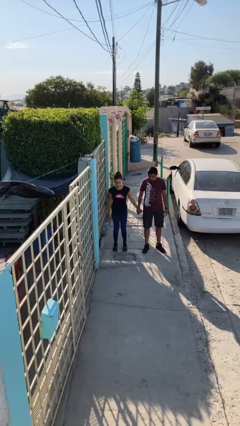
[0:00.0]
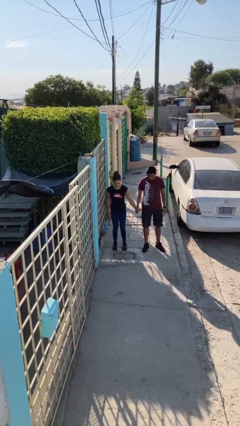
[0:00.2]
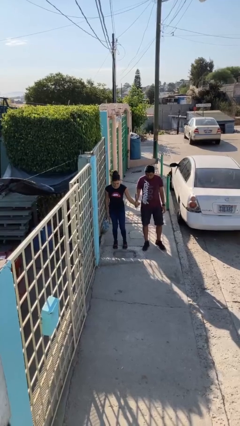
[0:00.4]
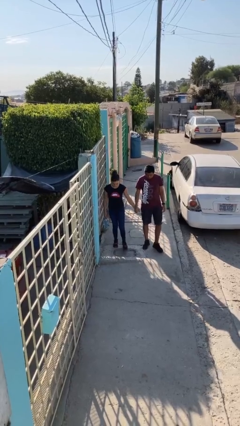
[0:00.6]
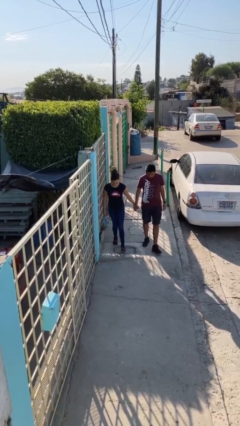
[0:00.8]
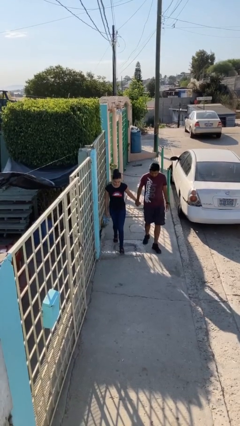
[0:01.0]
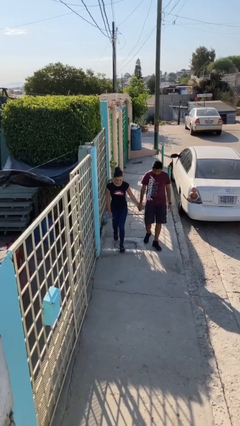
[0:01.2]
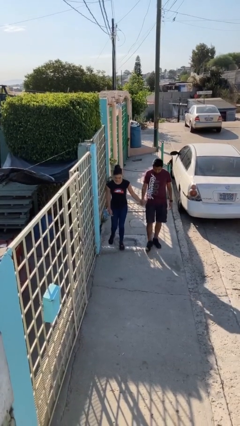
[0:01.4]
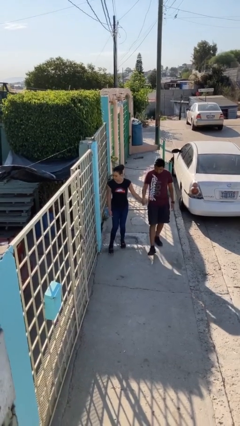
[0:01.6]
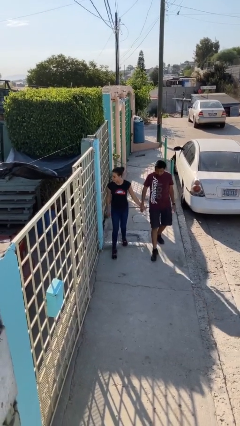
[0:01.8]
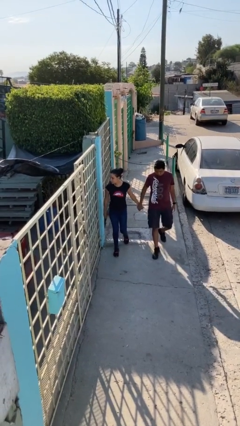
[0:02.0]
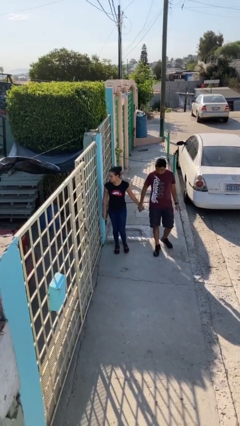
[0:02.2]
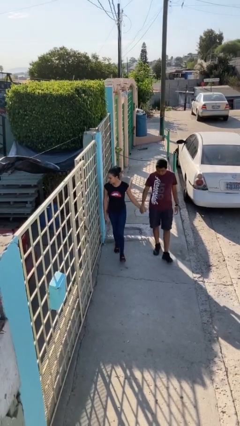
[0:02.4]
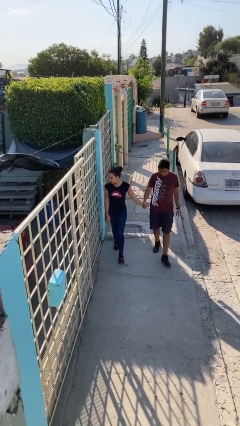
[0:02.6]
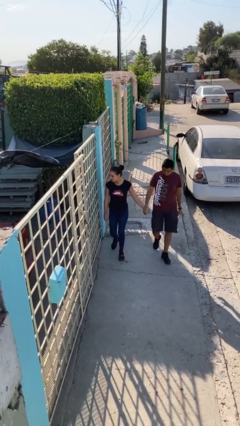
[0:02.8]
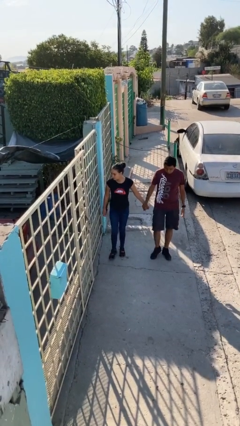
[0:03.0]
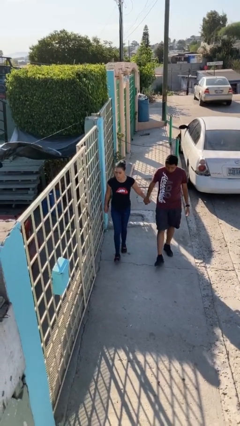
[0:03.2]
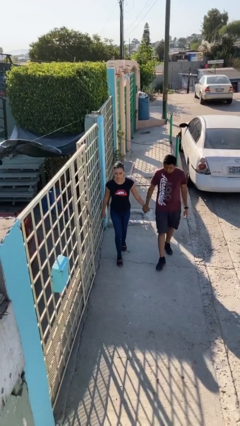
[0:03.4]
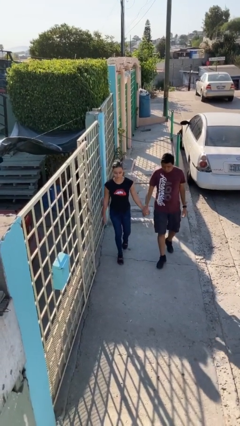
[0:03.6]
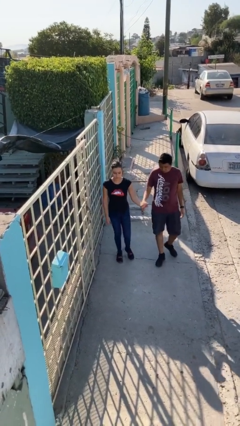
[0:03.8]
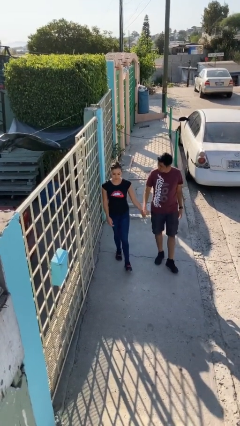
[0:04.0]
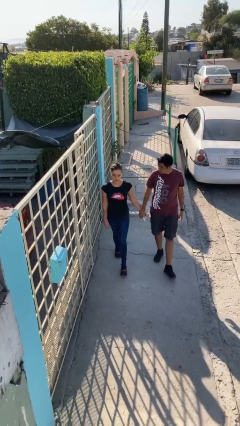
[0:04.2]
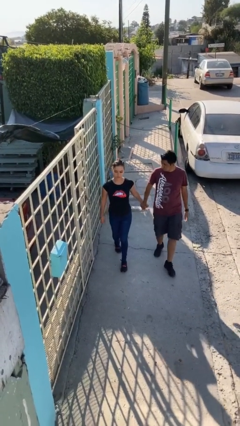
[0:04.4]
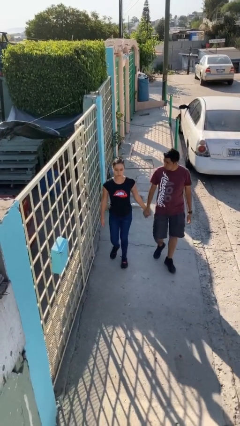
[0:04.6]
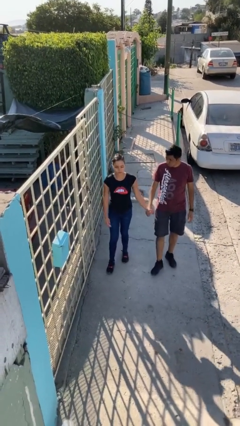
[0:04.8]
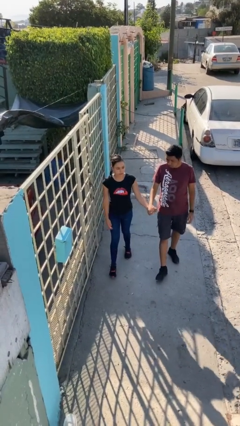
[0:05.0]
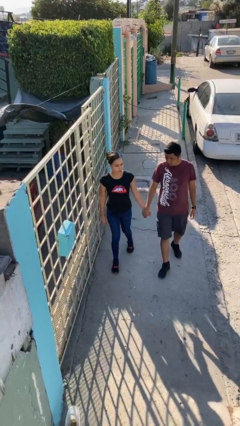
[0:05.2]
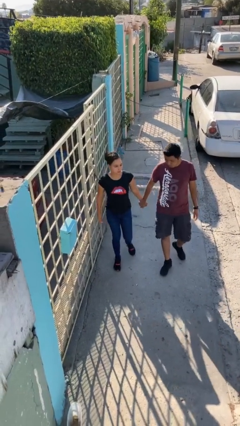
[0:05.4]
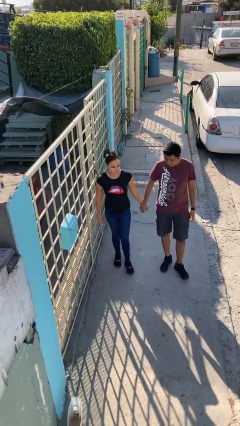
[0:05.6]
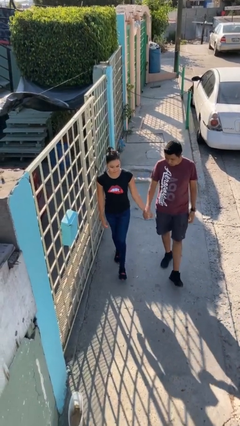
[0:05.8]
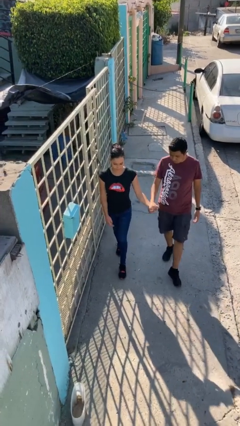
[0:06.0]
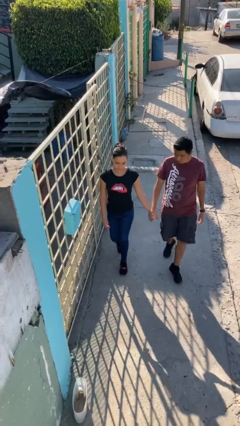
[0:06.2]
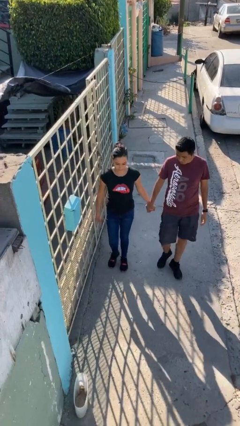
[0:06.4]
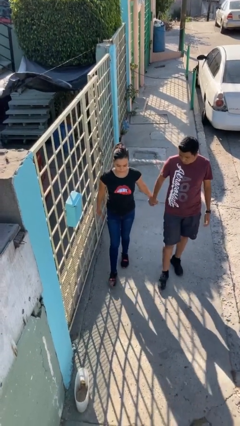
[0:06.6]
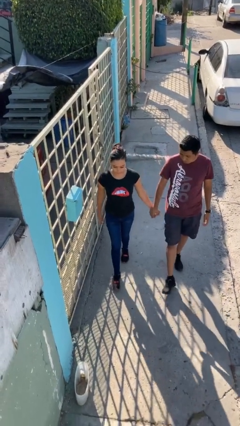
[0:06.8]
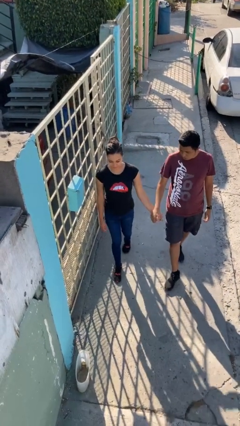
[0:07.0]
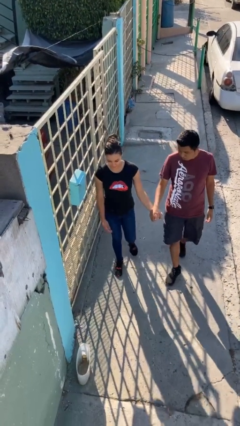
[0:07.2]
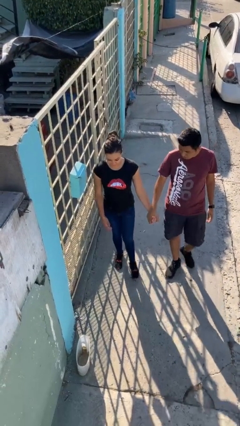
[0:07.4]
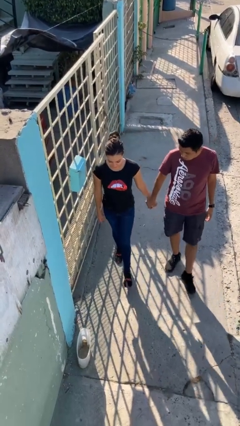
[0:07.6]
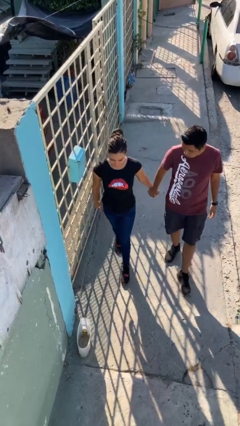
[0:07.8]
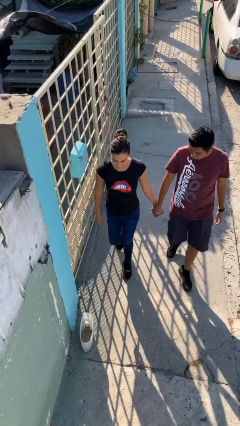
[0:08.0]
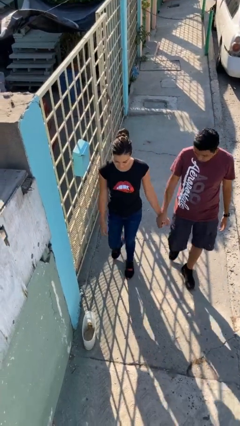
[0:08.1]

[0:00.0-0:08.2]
person holds hand

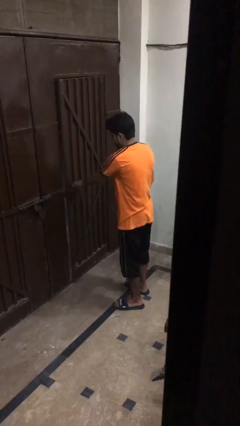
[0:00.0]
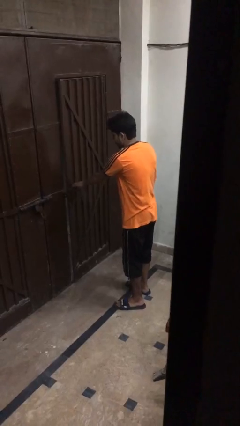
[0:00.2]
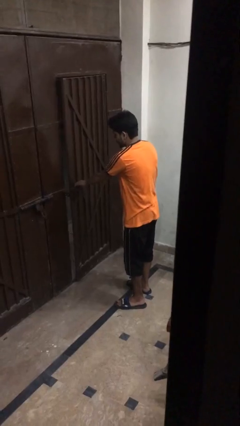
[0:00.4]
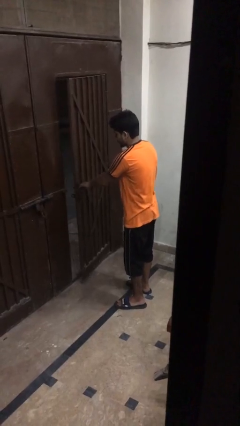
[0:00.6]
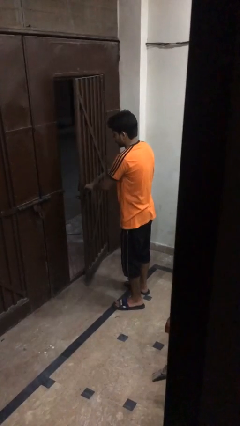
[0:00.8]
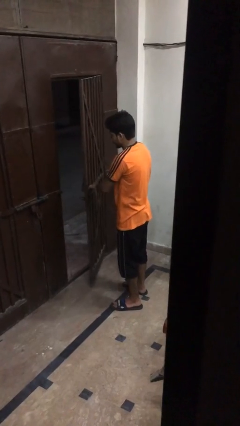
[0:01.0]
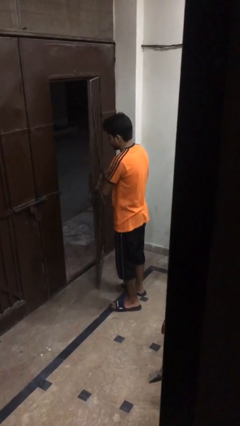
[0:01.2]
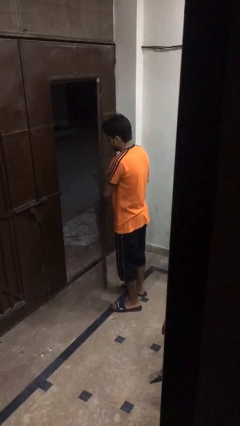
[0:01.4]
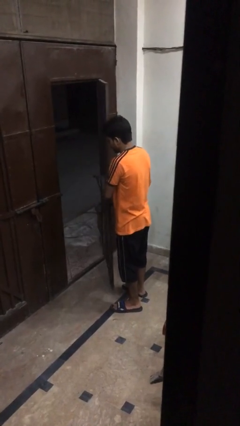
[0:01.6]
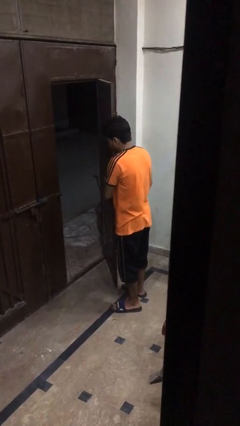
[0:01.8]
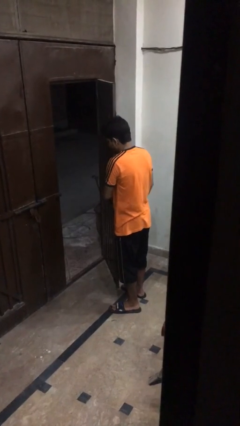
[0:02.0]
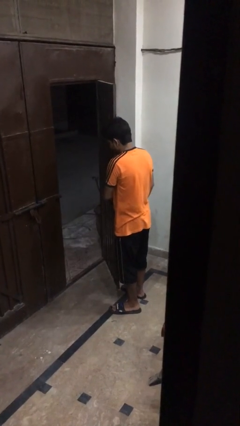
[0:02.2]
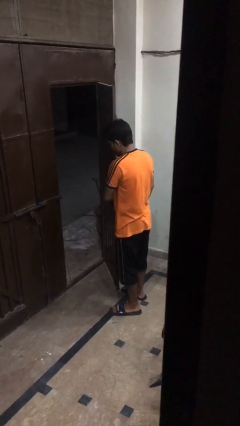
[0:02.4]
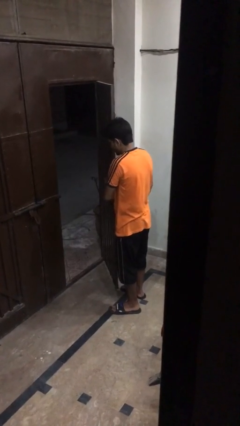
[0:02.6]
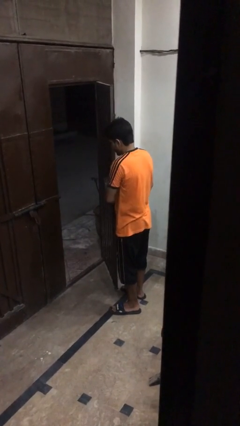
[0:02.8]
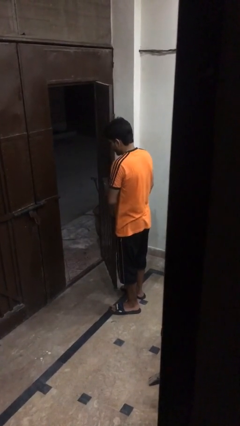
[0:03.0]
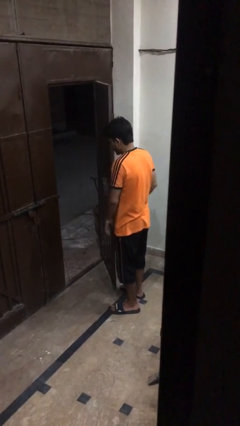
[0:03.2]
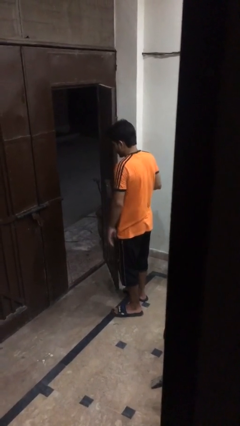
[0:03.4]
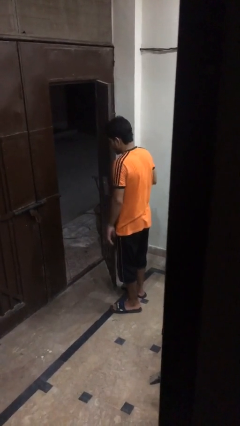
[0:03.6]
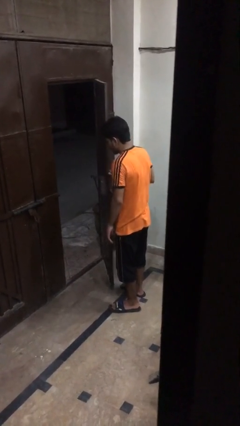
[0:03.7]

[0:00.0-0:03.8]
person opens gate

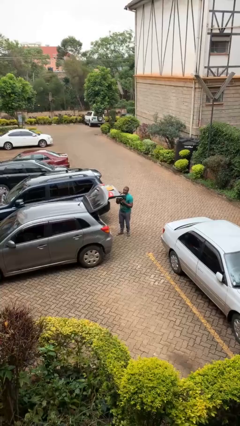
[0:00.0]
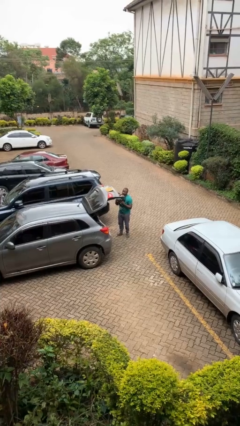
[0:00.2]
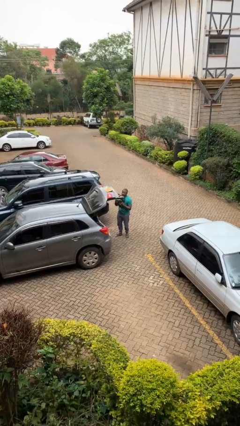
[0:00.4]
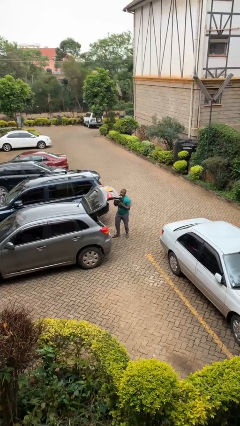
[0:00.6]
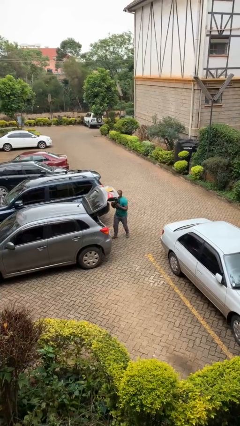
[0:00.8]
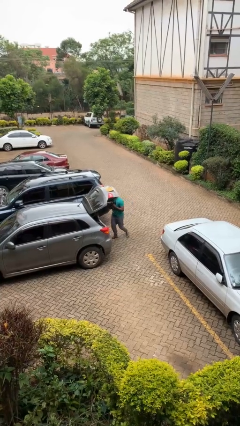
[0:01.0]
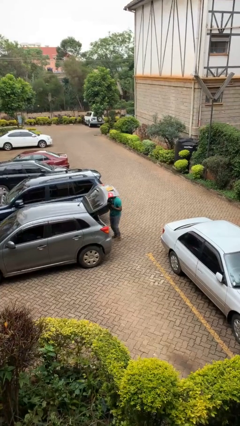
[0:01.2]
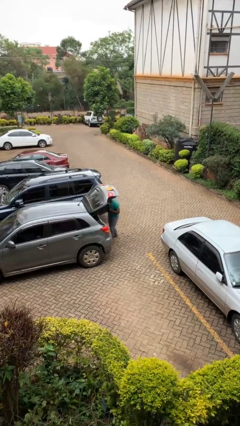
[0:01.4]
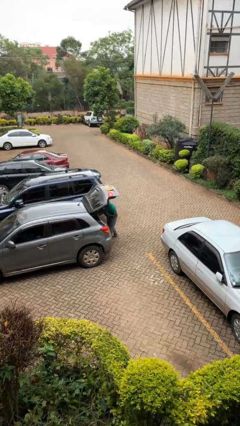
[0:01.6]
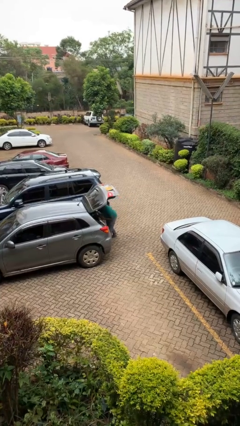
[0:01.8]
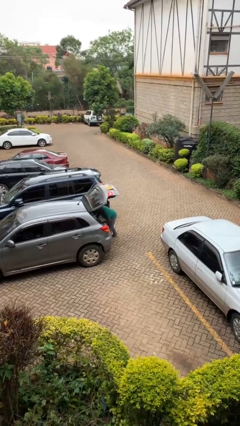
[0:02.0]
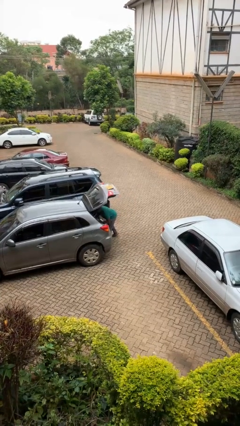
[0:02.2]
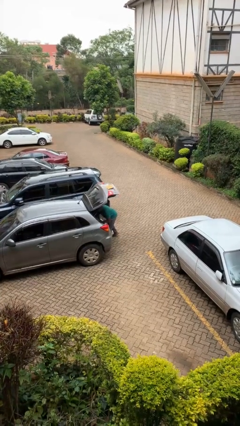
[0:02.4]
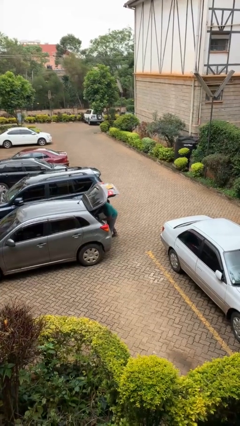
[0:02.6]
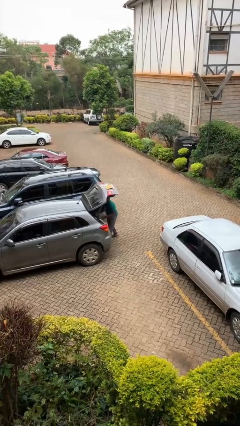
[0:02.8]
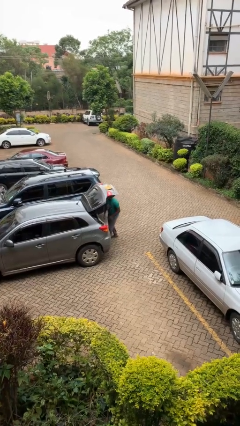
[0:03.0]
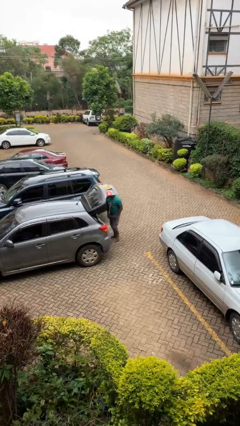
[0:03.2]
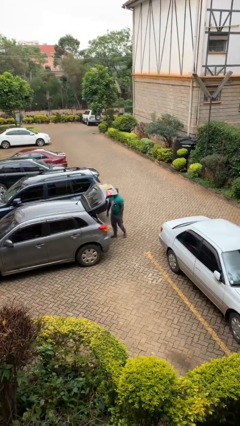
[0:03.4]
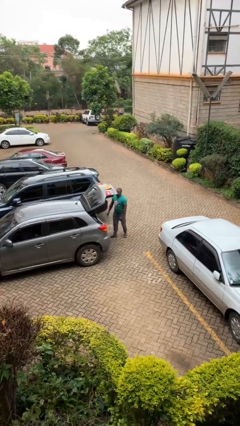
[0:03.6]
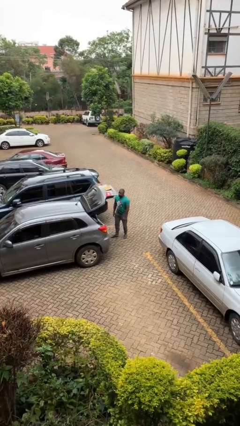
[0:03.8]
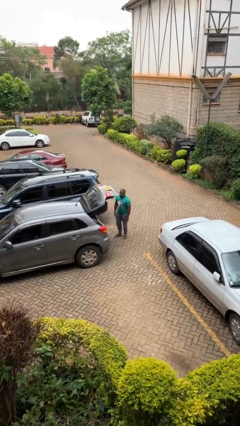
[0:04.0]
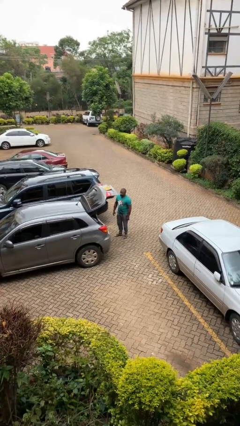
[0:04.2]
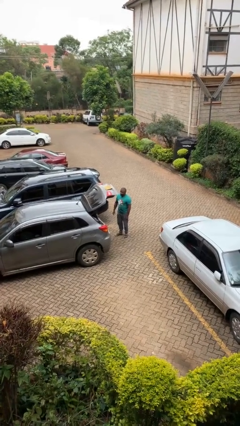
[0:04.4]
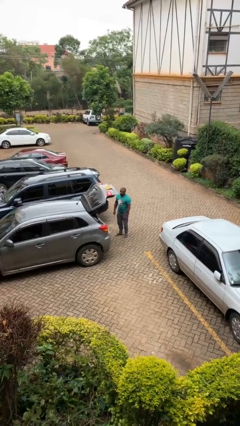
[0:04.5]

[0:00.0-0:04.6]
person loads car

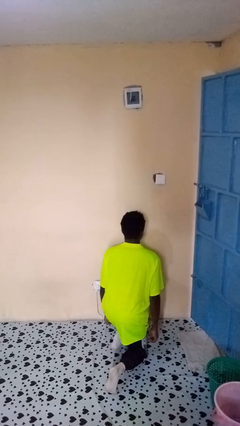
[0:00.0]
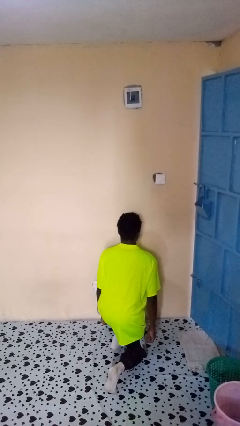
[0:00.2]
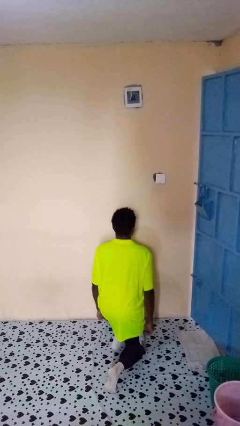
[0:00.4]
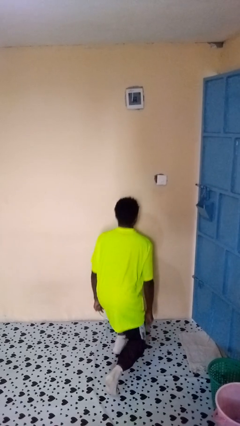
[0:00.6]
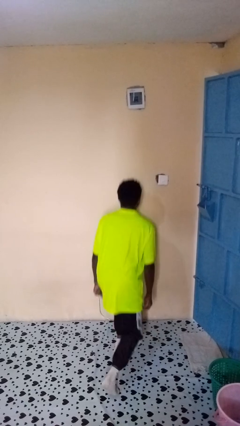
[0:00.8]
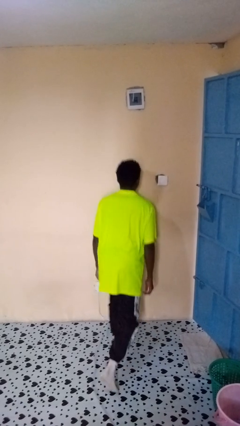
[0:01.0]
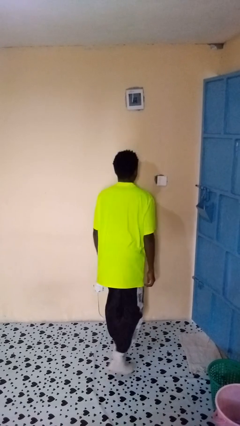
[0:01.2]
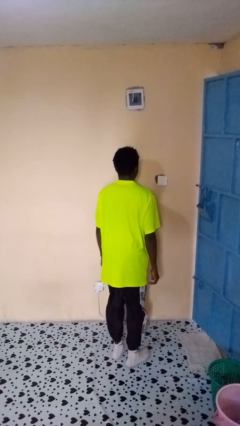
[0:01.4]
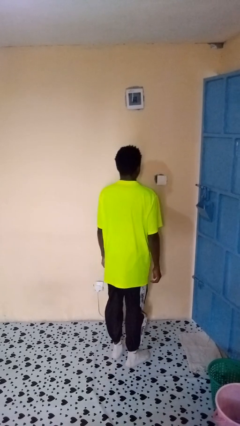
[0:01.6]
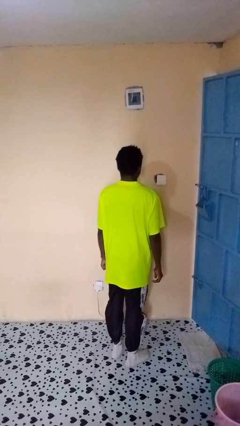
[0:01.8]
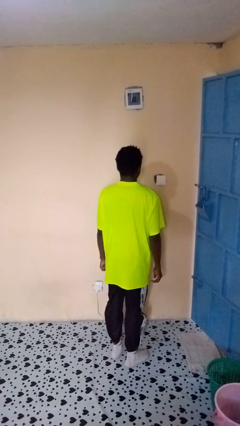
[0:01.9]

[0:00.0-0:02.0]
person stands up from floor
